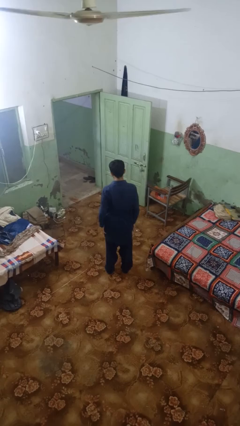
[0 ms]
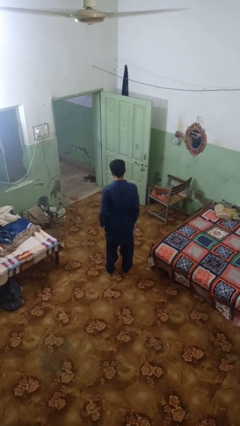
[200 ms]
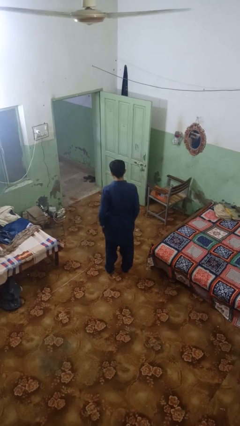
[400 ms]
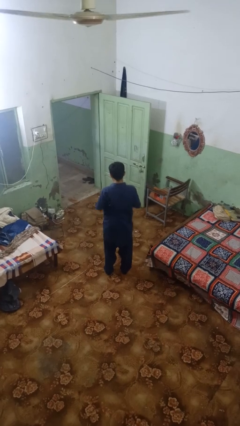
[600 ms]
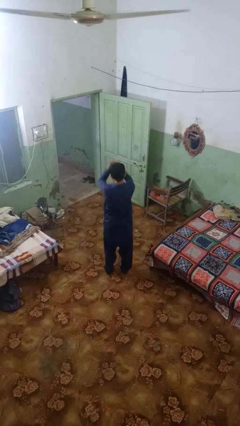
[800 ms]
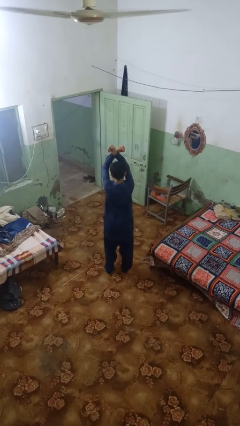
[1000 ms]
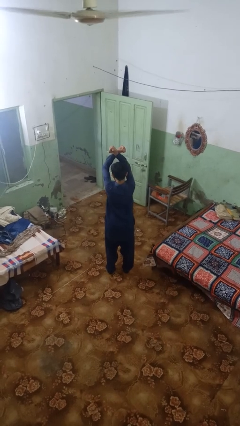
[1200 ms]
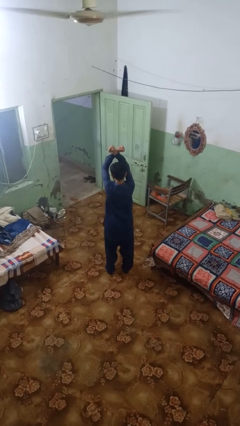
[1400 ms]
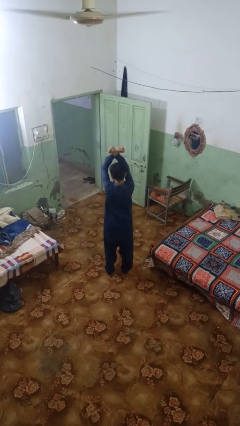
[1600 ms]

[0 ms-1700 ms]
person crosses arms

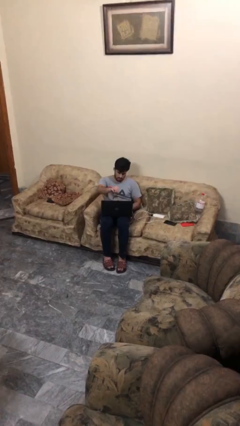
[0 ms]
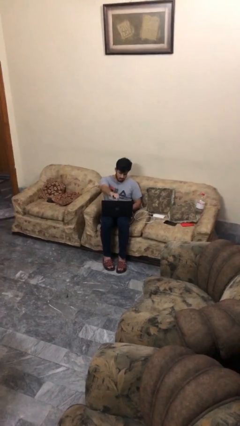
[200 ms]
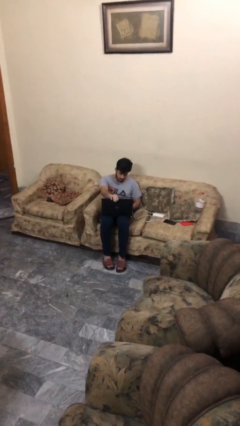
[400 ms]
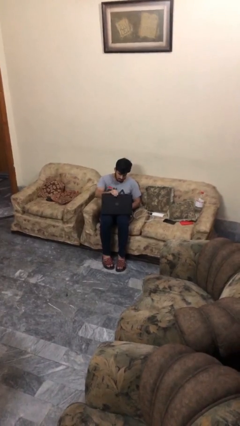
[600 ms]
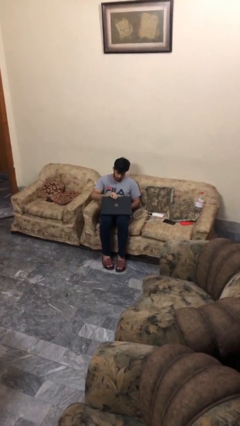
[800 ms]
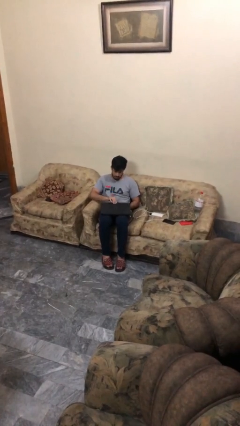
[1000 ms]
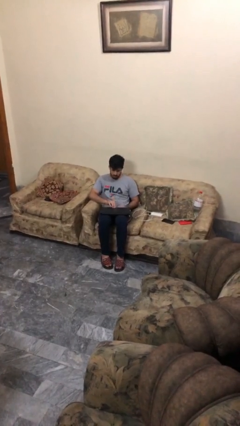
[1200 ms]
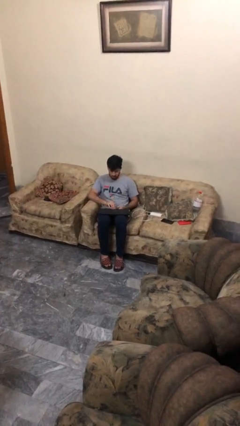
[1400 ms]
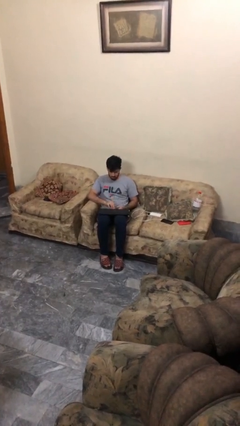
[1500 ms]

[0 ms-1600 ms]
person closes laptop

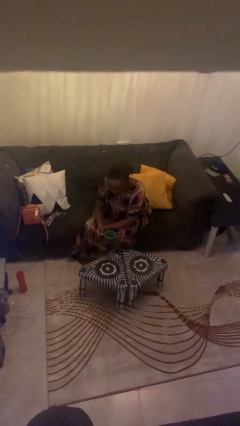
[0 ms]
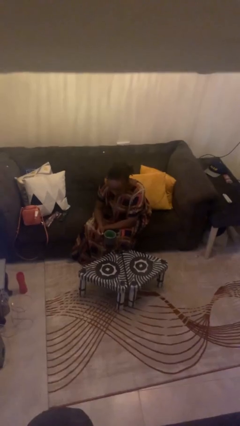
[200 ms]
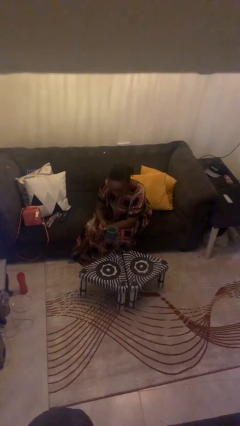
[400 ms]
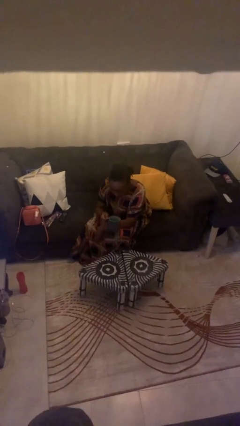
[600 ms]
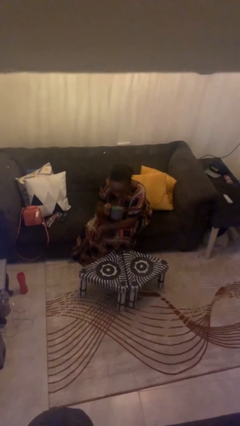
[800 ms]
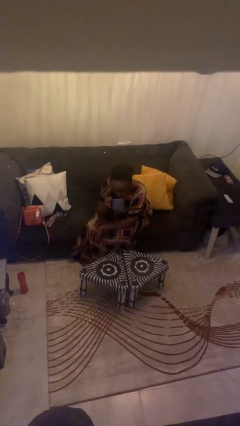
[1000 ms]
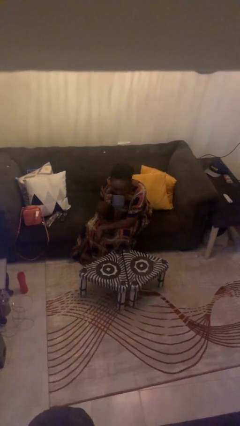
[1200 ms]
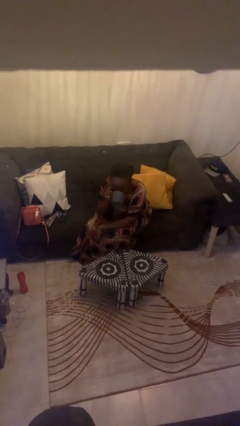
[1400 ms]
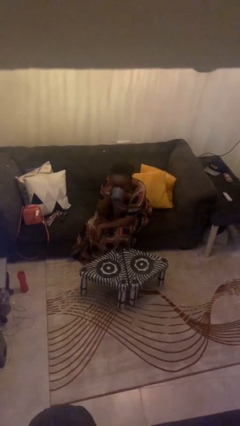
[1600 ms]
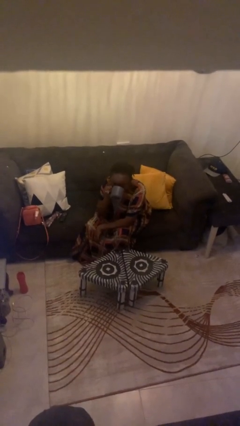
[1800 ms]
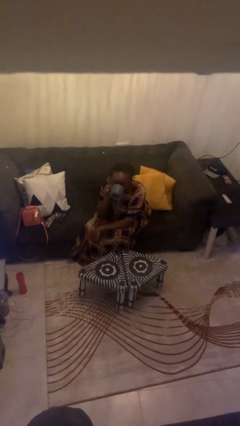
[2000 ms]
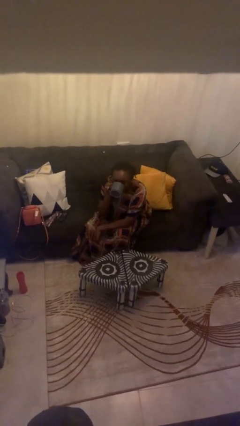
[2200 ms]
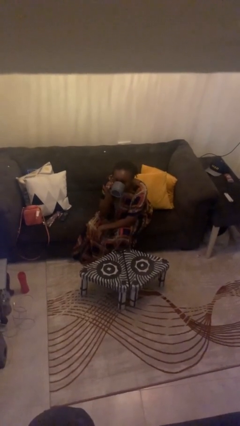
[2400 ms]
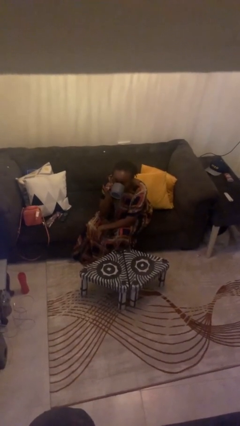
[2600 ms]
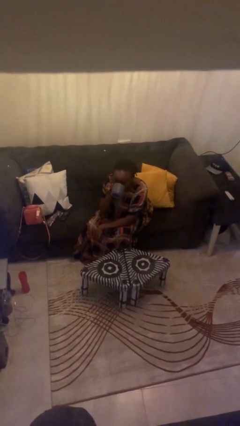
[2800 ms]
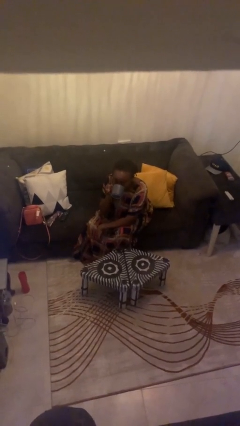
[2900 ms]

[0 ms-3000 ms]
person drinks from mug

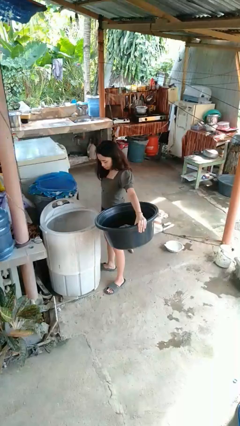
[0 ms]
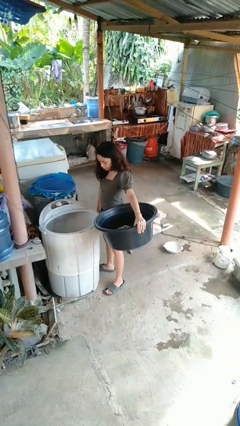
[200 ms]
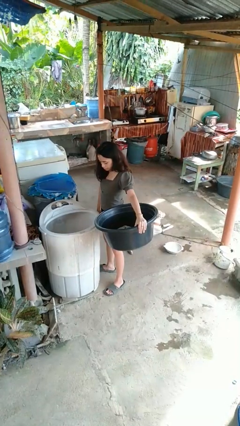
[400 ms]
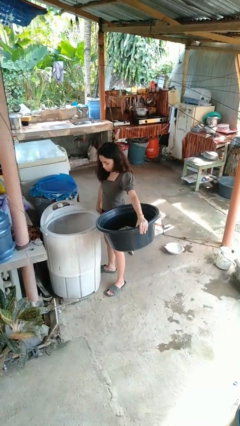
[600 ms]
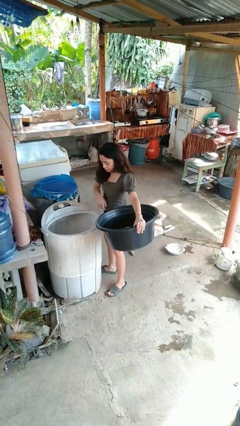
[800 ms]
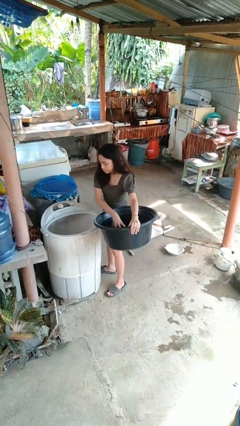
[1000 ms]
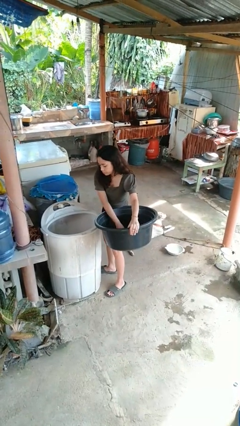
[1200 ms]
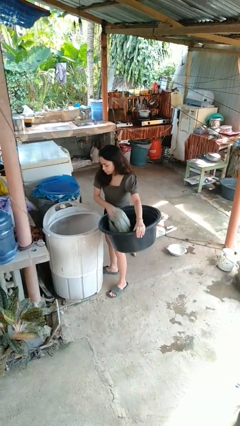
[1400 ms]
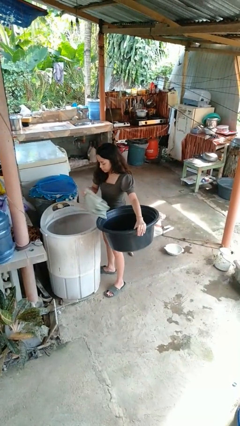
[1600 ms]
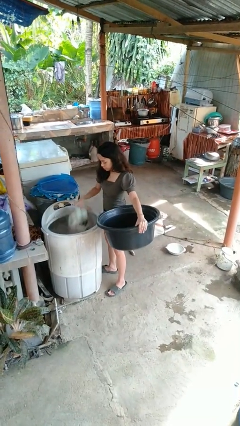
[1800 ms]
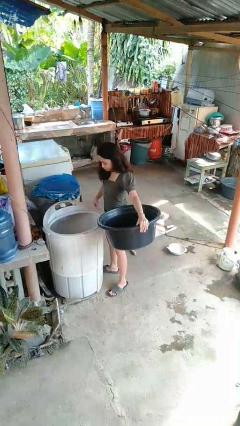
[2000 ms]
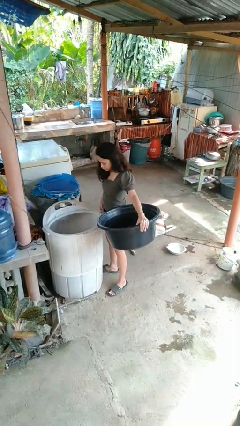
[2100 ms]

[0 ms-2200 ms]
person loads clotheswasher

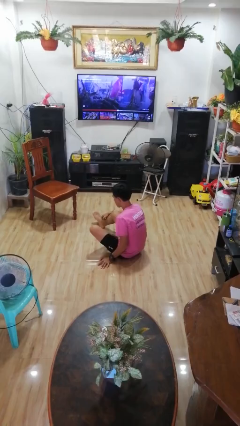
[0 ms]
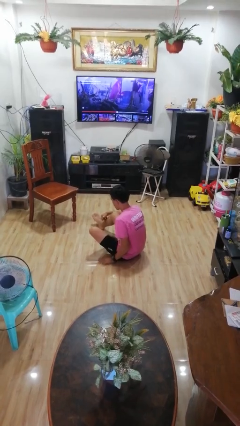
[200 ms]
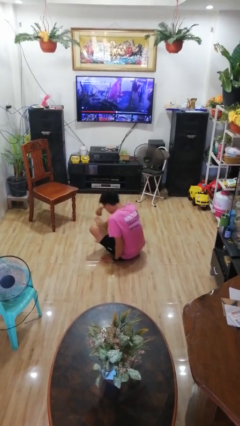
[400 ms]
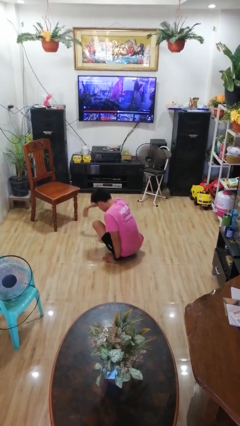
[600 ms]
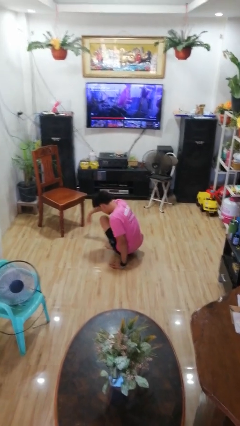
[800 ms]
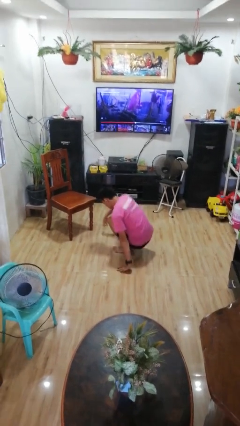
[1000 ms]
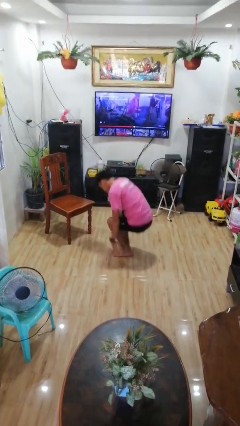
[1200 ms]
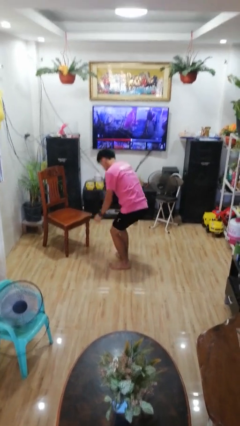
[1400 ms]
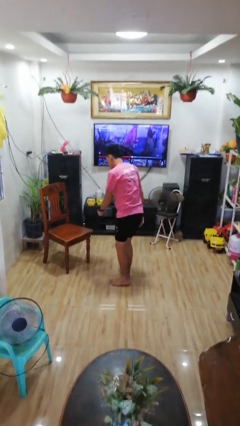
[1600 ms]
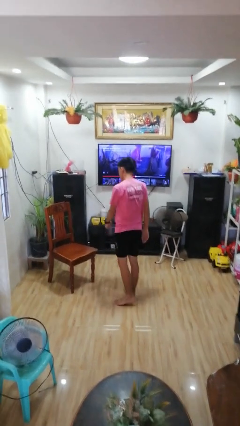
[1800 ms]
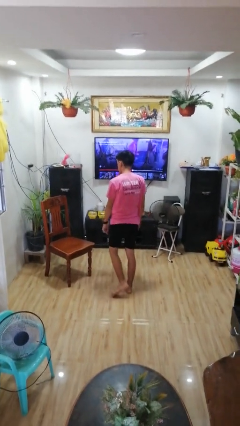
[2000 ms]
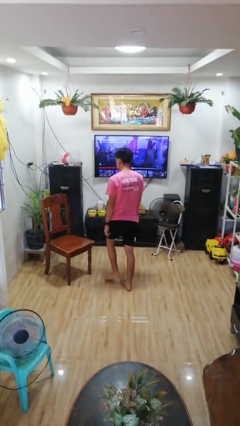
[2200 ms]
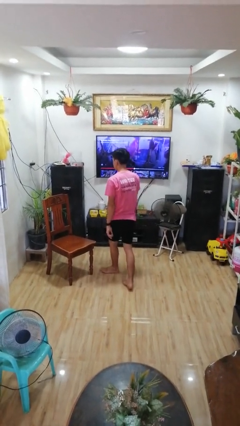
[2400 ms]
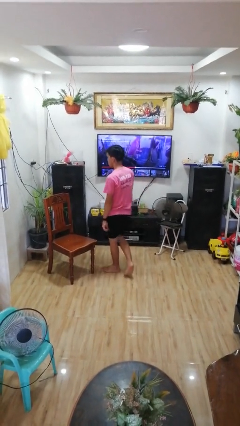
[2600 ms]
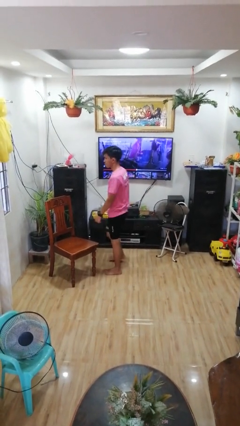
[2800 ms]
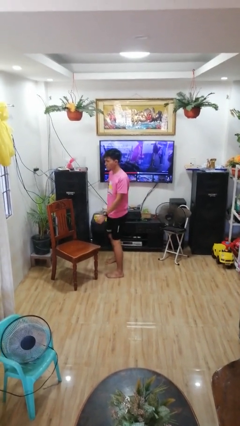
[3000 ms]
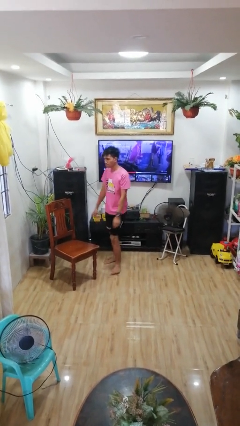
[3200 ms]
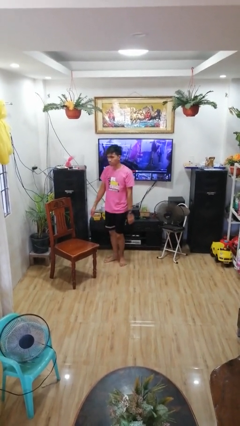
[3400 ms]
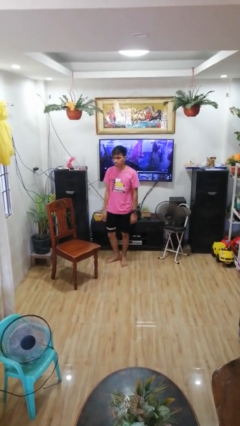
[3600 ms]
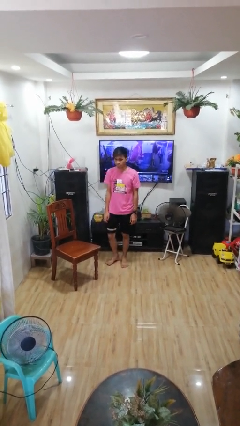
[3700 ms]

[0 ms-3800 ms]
person stands up from floor

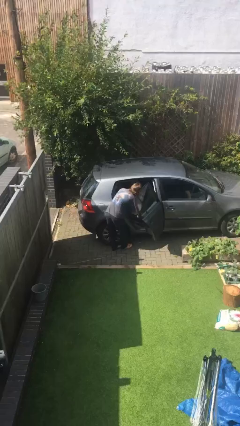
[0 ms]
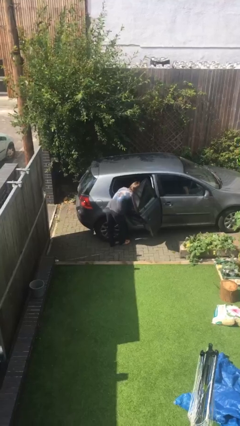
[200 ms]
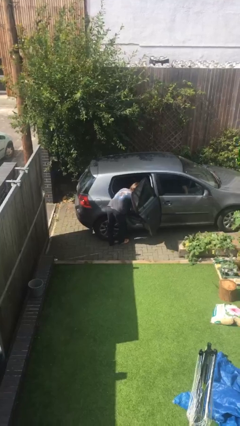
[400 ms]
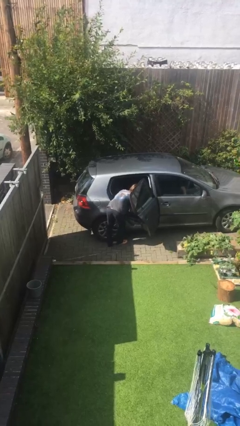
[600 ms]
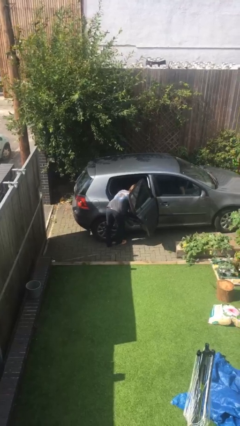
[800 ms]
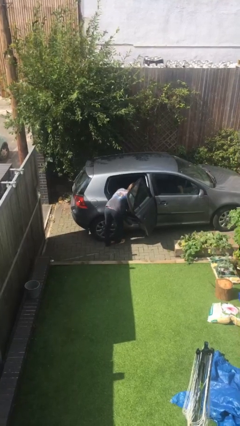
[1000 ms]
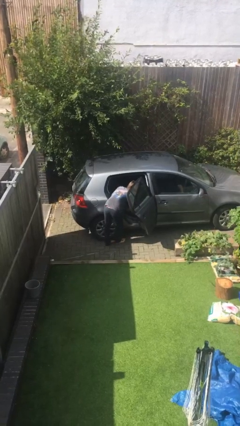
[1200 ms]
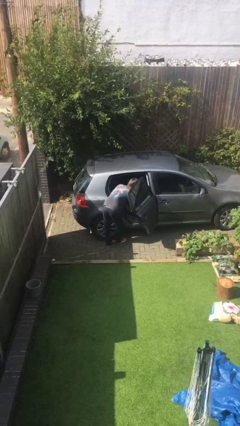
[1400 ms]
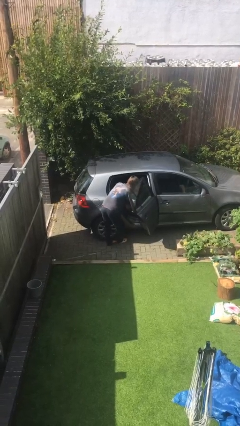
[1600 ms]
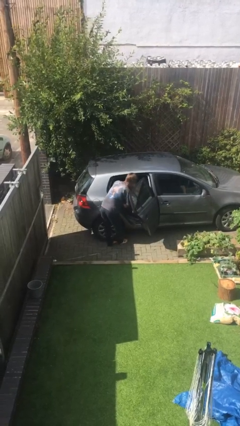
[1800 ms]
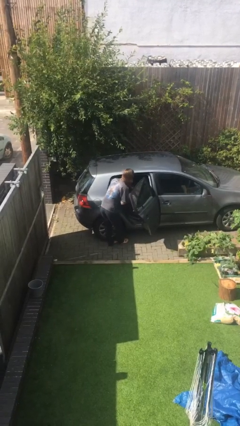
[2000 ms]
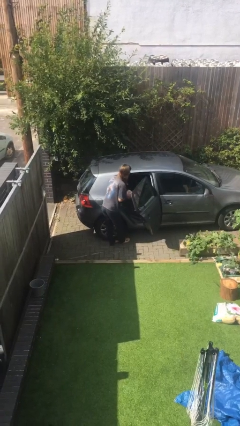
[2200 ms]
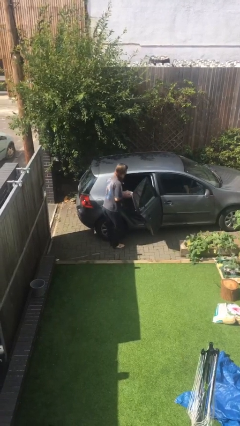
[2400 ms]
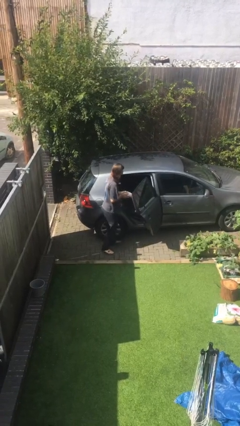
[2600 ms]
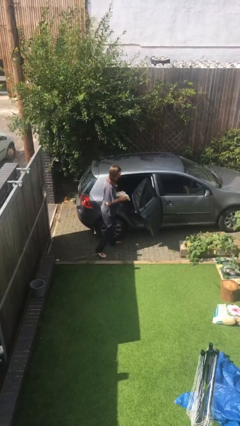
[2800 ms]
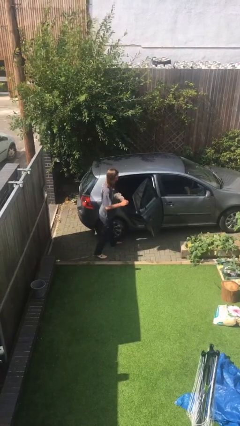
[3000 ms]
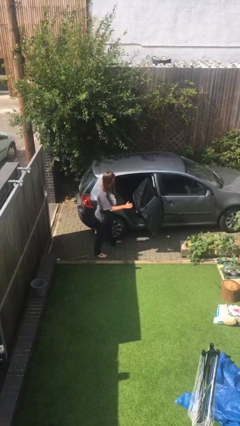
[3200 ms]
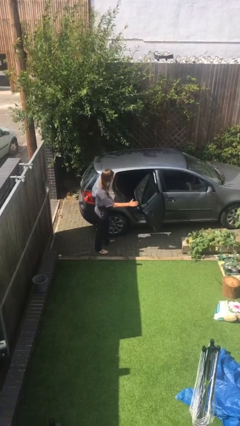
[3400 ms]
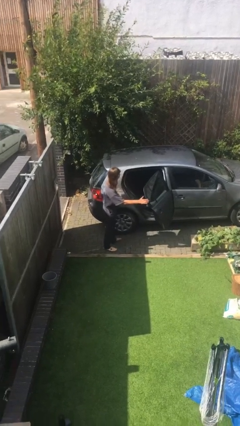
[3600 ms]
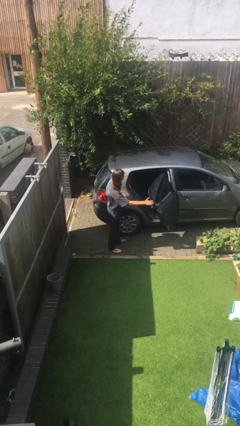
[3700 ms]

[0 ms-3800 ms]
person unloads car

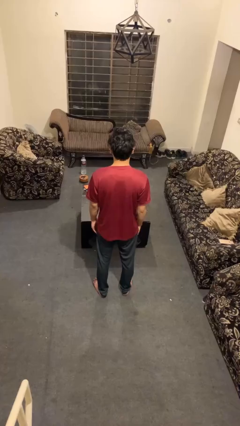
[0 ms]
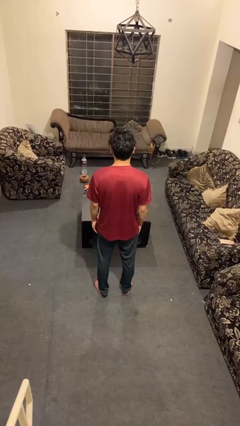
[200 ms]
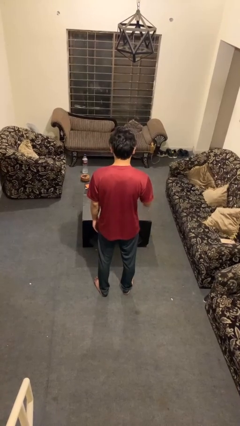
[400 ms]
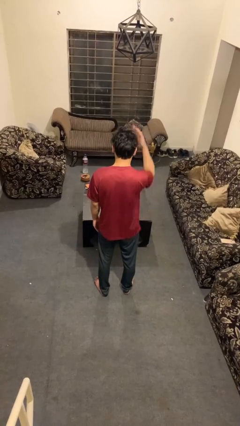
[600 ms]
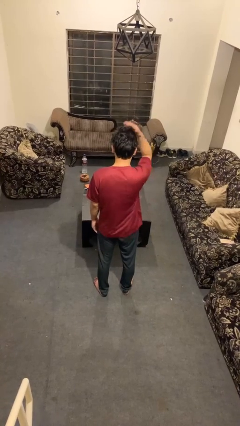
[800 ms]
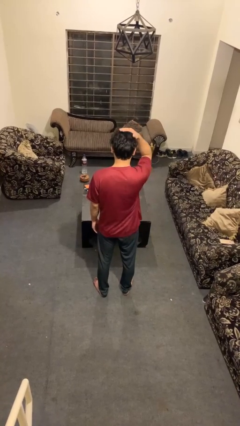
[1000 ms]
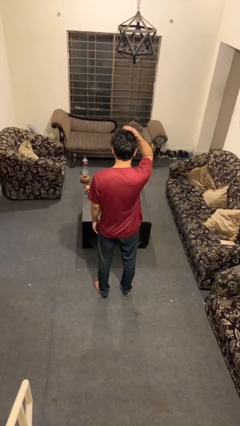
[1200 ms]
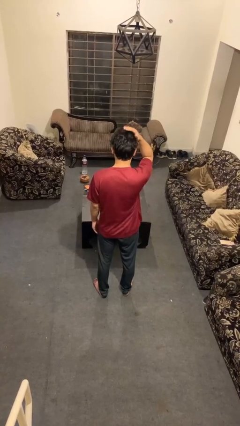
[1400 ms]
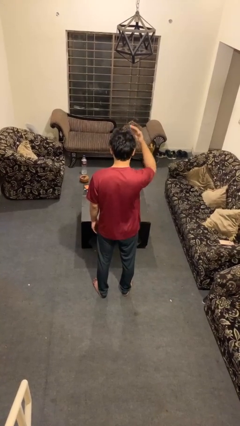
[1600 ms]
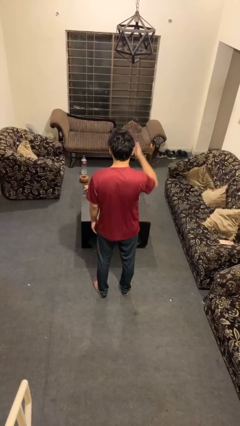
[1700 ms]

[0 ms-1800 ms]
person pats head
